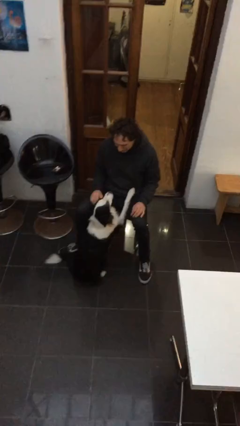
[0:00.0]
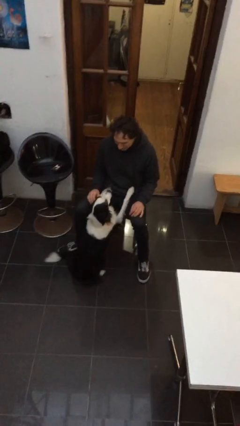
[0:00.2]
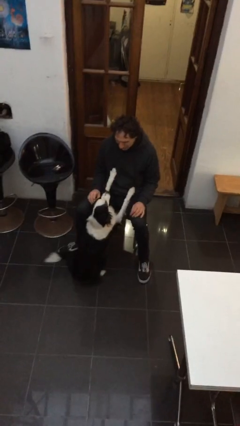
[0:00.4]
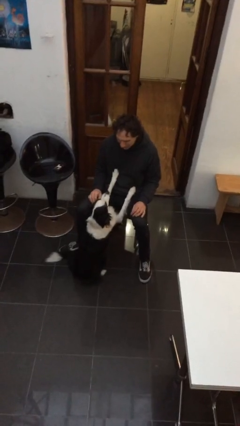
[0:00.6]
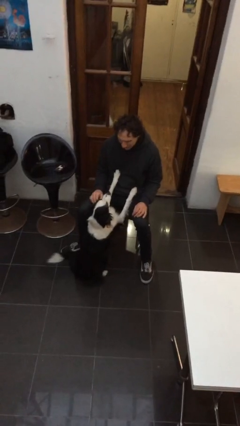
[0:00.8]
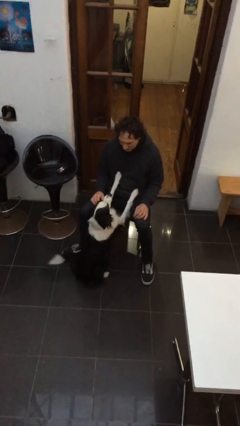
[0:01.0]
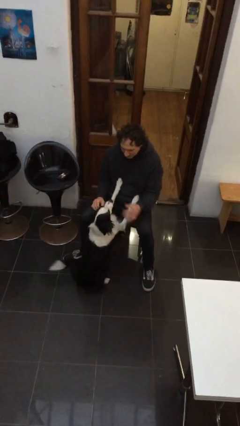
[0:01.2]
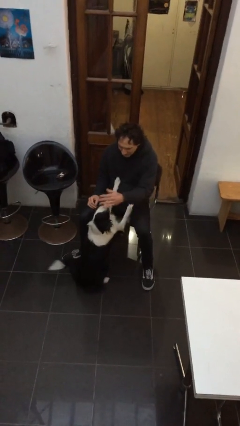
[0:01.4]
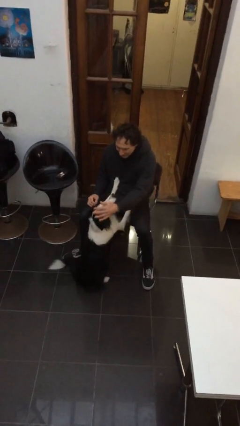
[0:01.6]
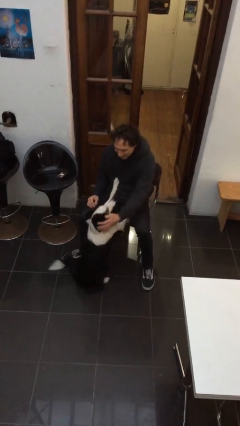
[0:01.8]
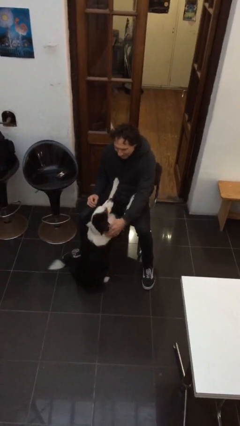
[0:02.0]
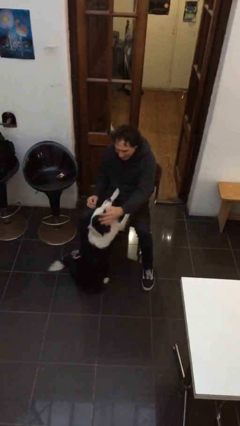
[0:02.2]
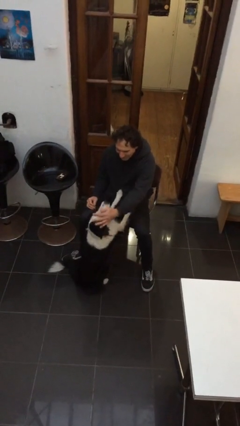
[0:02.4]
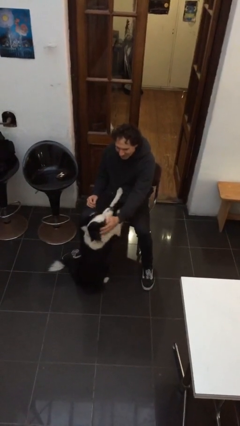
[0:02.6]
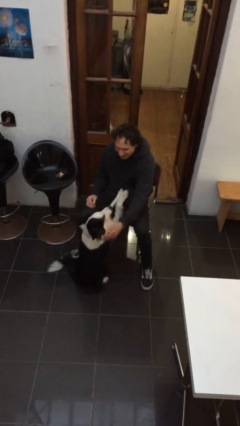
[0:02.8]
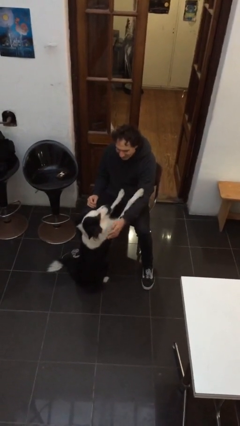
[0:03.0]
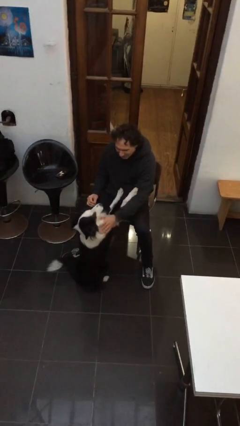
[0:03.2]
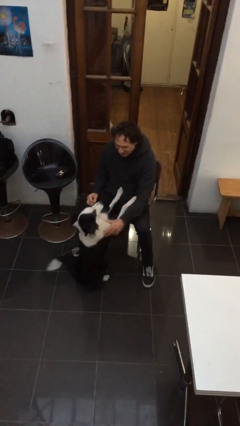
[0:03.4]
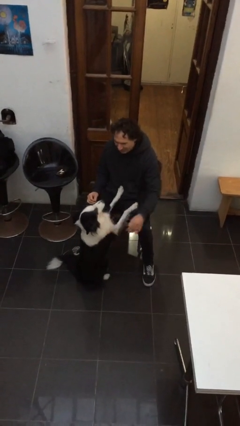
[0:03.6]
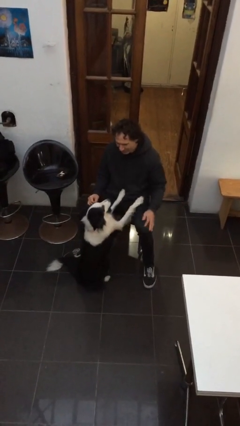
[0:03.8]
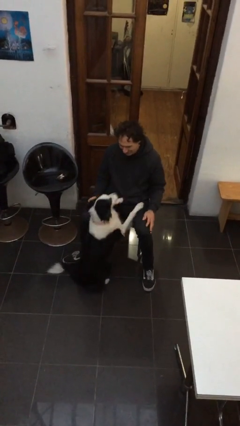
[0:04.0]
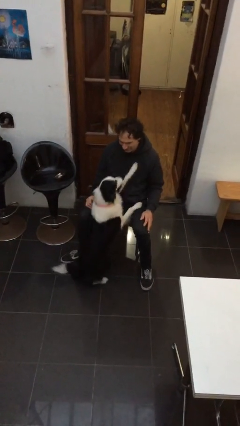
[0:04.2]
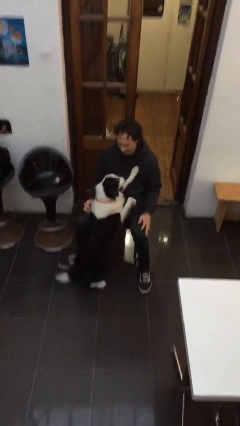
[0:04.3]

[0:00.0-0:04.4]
person pets dog

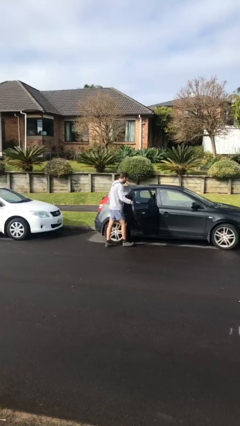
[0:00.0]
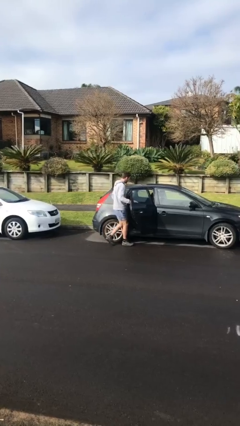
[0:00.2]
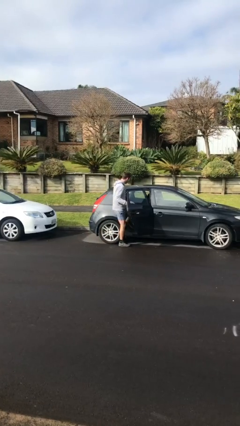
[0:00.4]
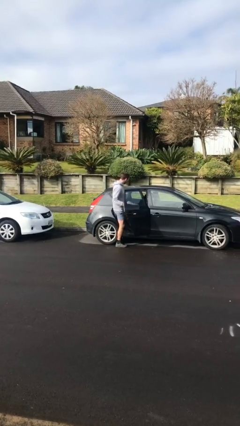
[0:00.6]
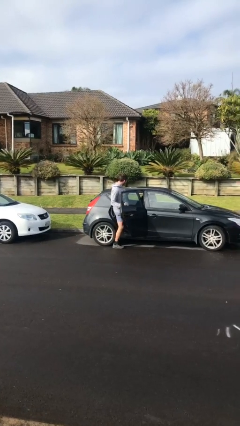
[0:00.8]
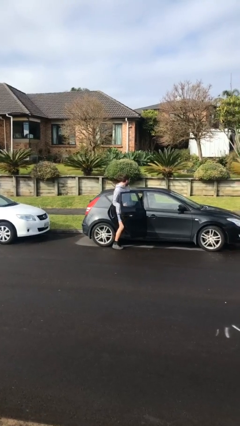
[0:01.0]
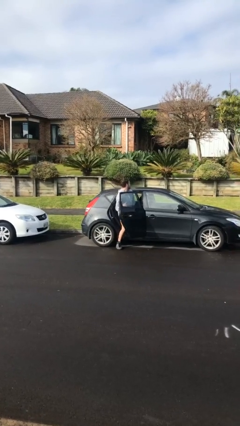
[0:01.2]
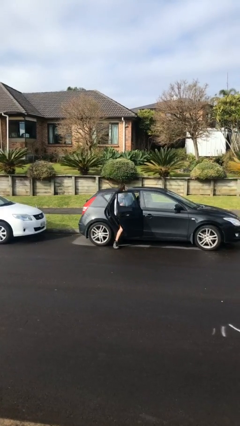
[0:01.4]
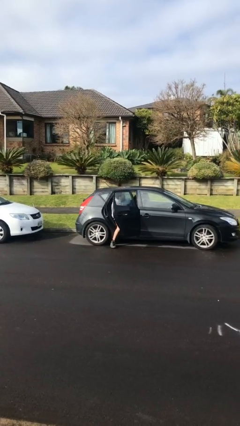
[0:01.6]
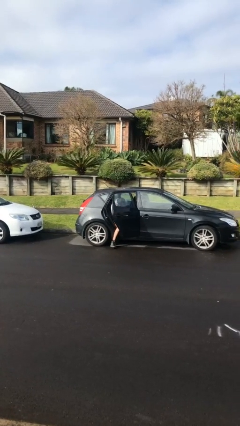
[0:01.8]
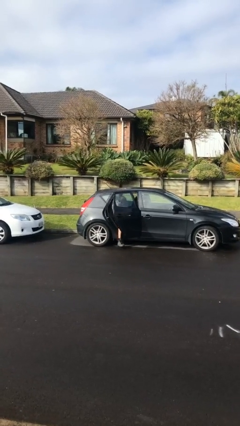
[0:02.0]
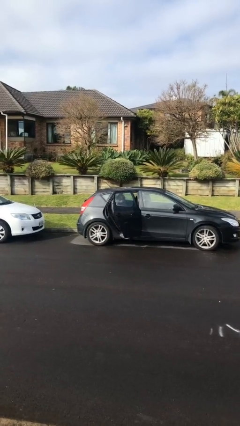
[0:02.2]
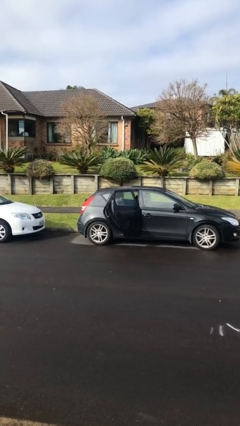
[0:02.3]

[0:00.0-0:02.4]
person enters car

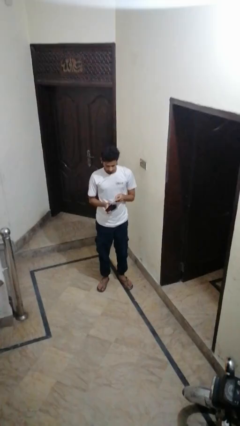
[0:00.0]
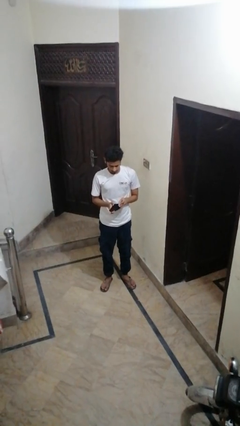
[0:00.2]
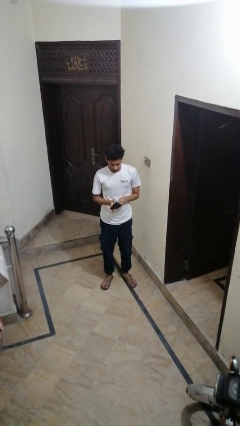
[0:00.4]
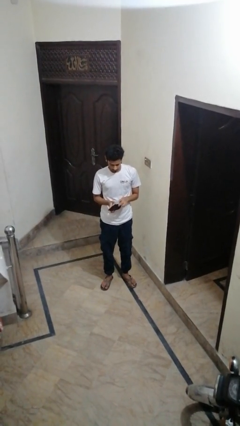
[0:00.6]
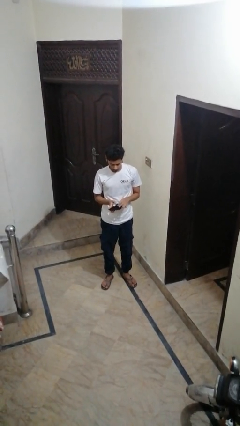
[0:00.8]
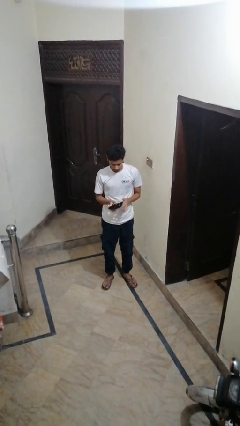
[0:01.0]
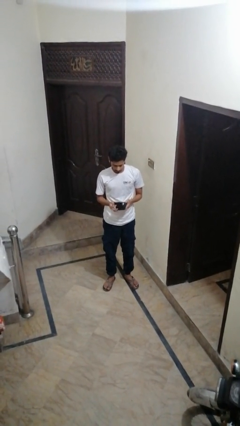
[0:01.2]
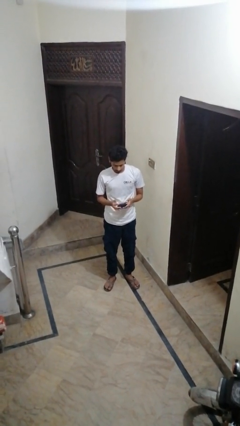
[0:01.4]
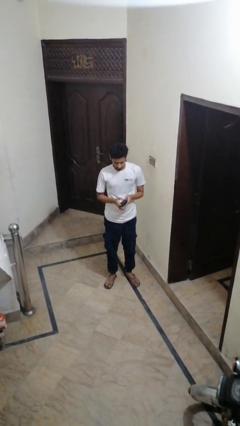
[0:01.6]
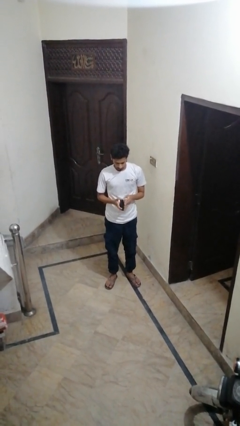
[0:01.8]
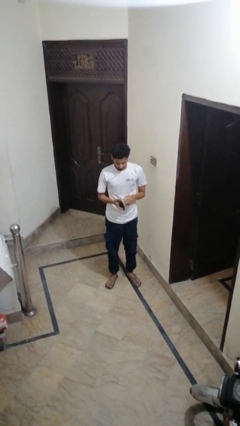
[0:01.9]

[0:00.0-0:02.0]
person puts object into purse

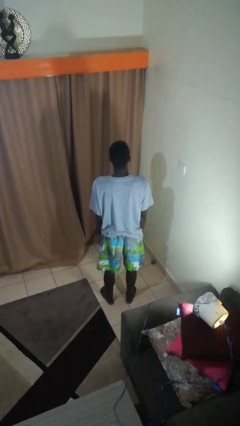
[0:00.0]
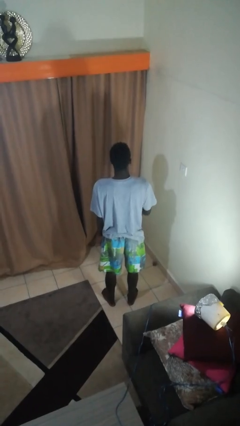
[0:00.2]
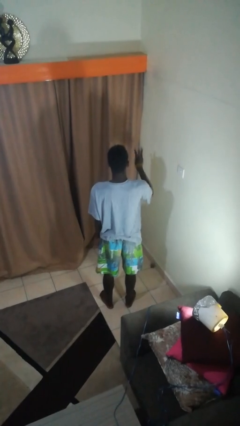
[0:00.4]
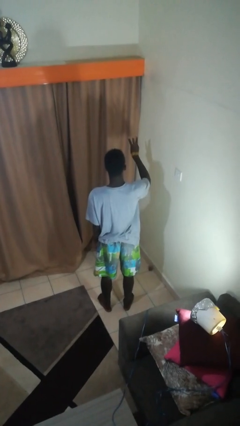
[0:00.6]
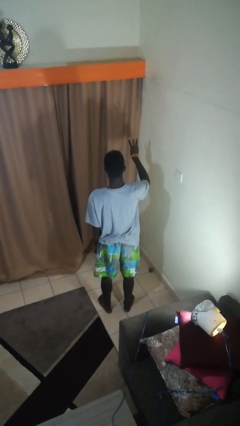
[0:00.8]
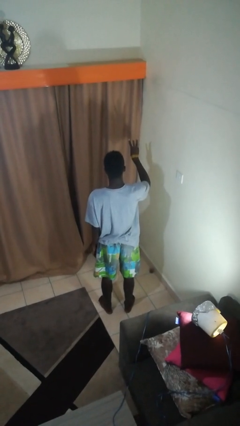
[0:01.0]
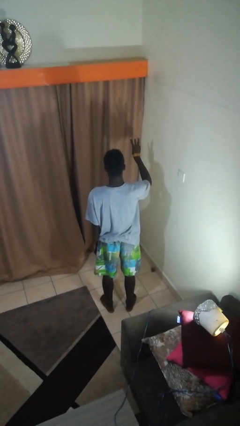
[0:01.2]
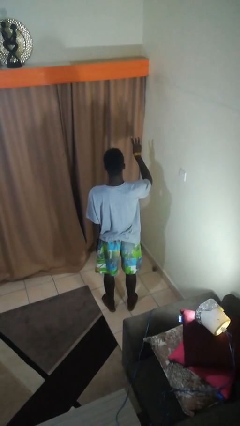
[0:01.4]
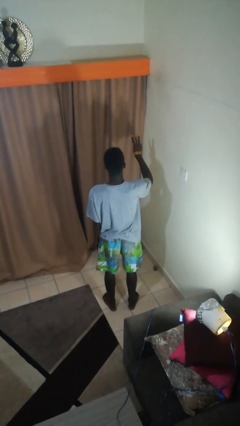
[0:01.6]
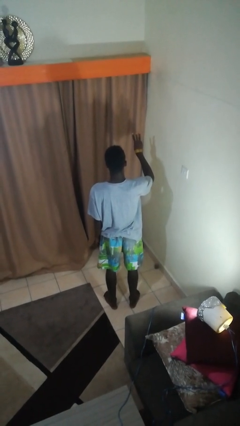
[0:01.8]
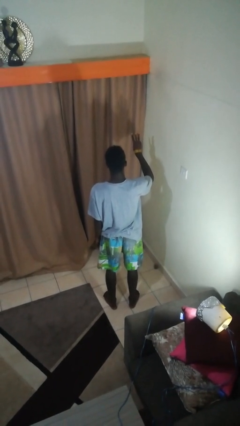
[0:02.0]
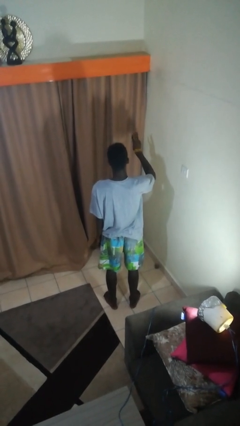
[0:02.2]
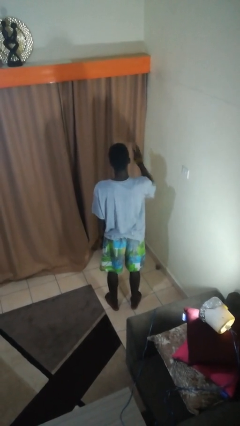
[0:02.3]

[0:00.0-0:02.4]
person gestures number three

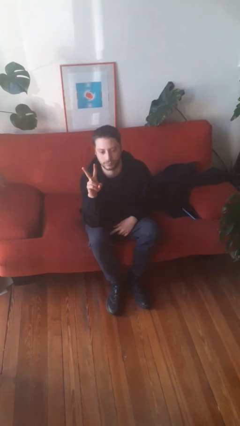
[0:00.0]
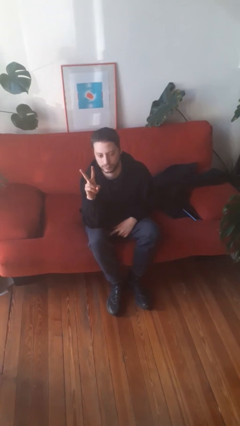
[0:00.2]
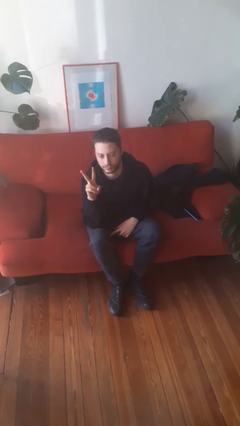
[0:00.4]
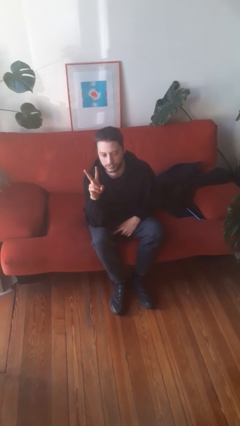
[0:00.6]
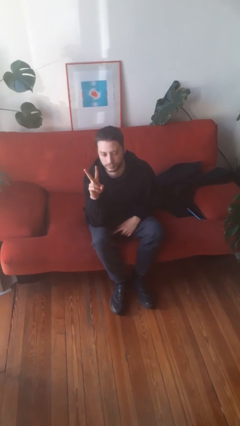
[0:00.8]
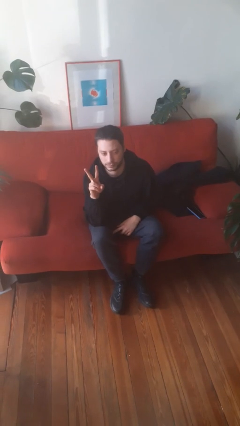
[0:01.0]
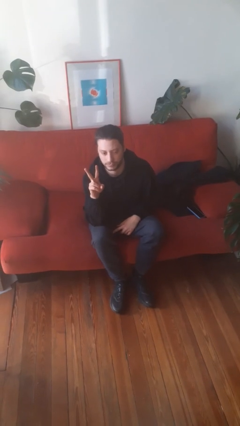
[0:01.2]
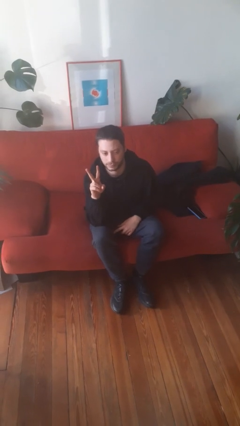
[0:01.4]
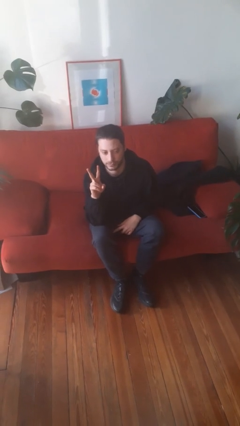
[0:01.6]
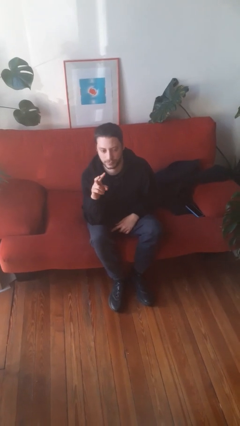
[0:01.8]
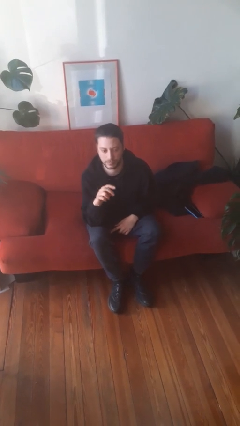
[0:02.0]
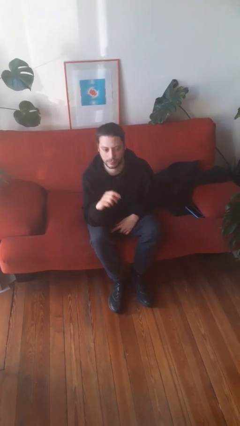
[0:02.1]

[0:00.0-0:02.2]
person gestures peace

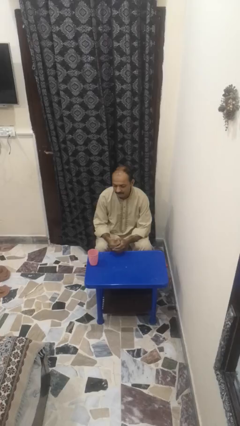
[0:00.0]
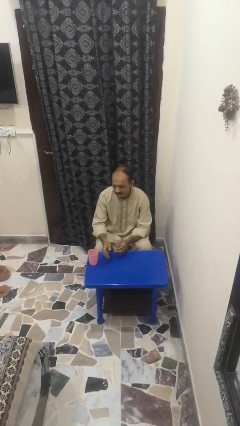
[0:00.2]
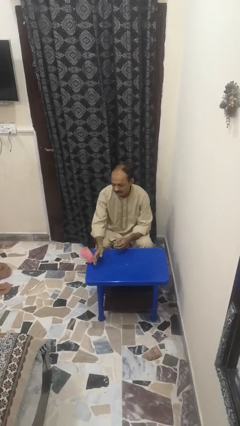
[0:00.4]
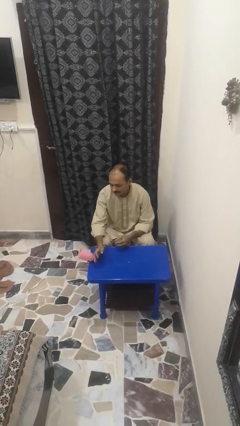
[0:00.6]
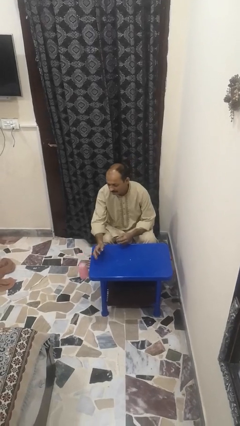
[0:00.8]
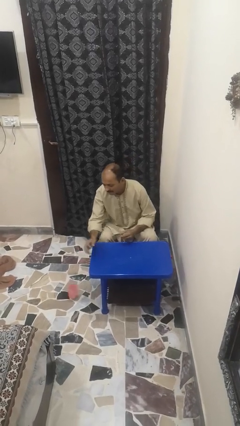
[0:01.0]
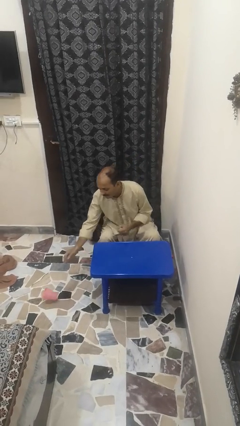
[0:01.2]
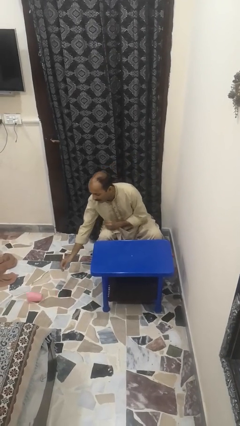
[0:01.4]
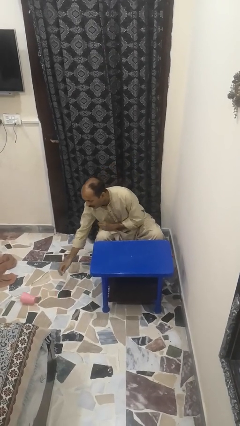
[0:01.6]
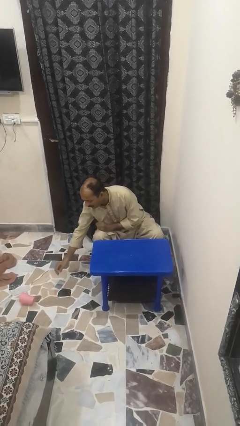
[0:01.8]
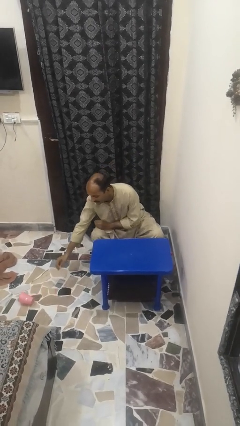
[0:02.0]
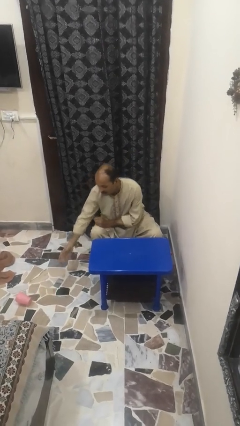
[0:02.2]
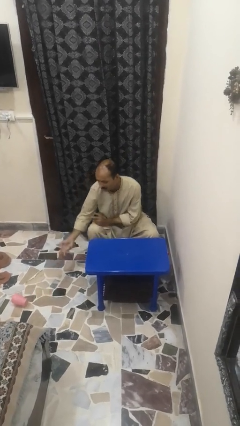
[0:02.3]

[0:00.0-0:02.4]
person spills on floor

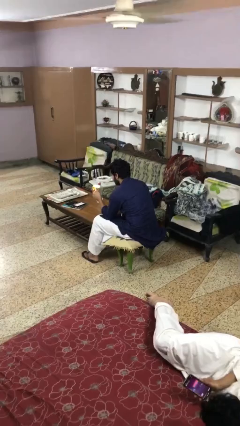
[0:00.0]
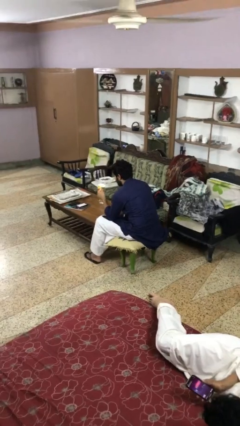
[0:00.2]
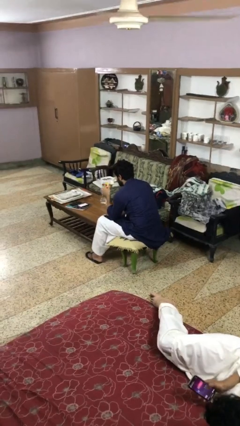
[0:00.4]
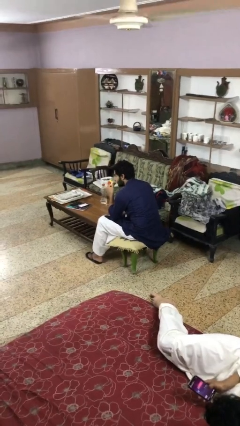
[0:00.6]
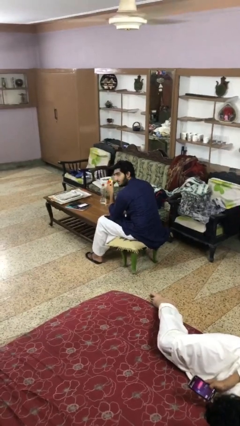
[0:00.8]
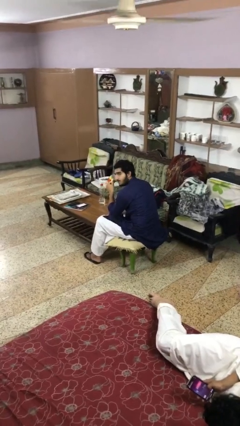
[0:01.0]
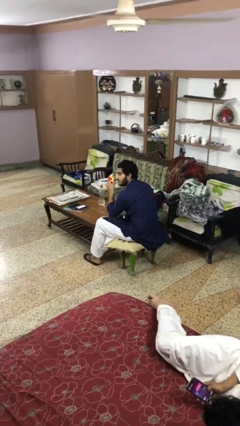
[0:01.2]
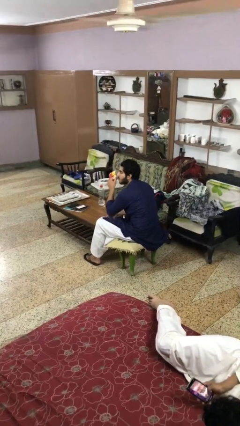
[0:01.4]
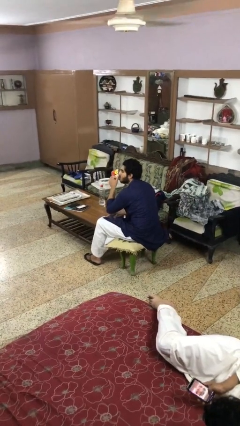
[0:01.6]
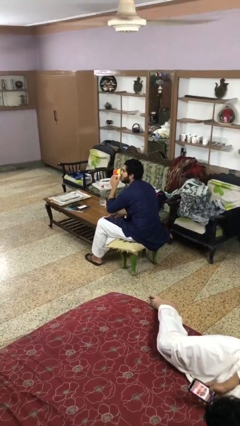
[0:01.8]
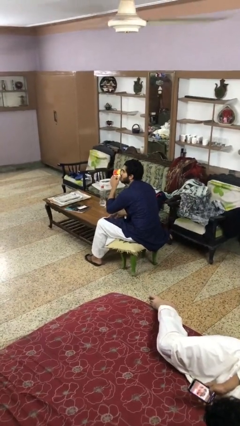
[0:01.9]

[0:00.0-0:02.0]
person drinks from mug
